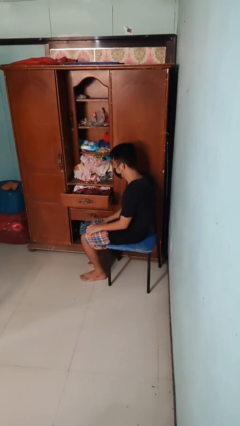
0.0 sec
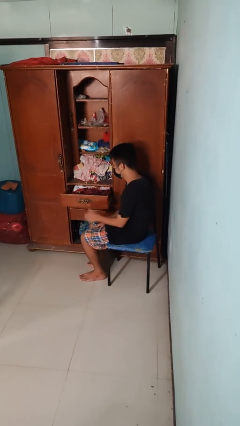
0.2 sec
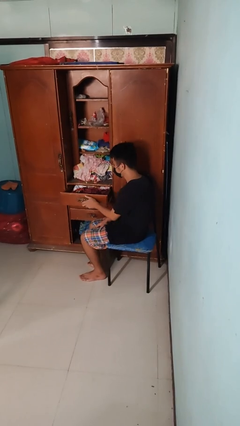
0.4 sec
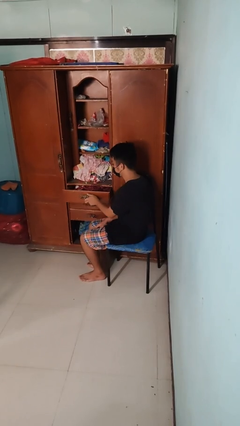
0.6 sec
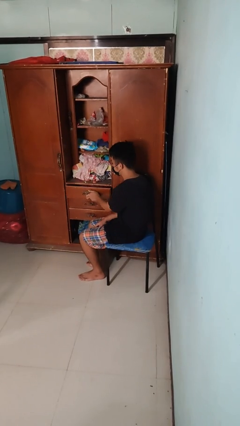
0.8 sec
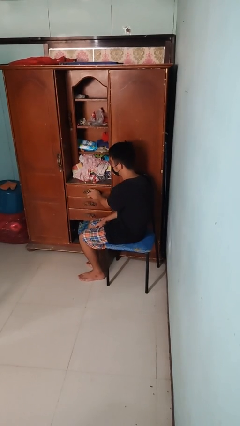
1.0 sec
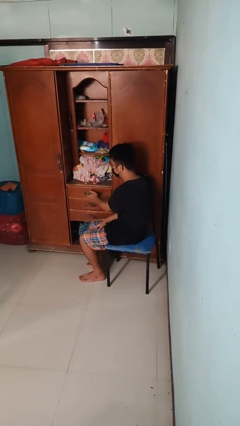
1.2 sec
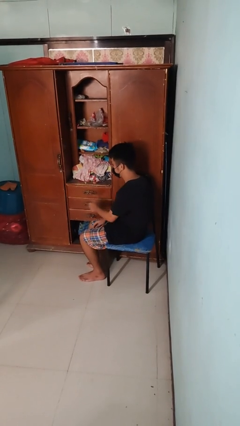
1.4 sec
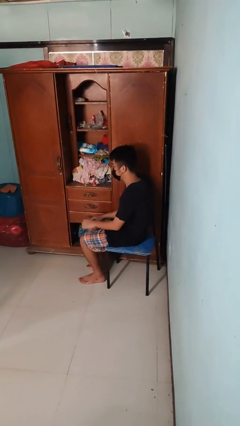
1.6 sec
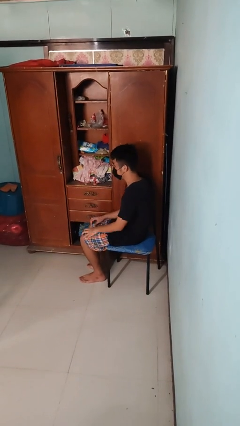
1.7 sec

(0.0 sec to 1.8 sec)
person closes dresser drawer

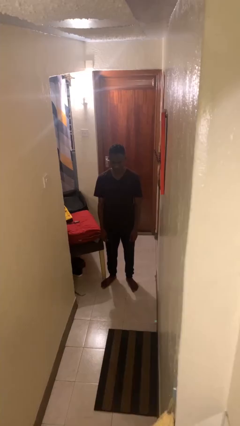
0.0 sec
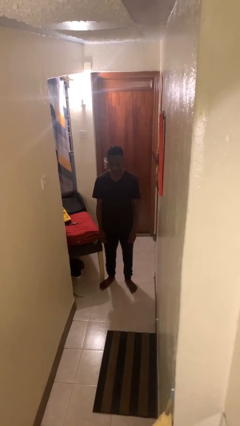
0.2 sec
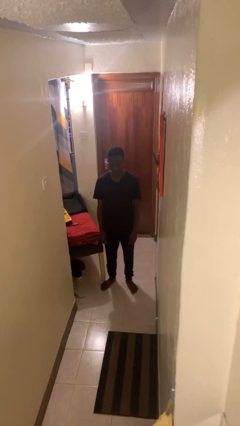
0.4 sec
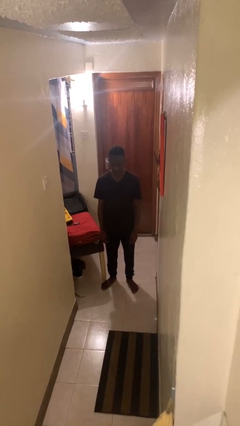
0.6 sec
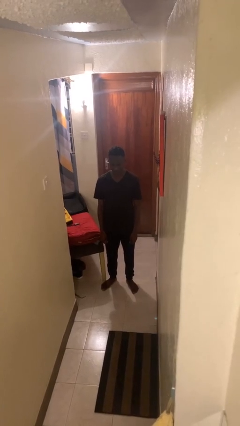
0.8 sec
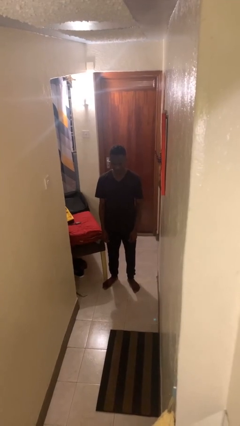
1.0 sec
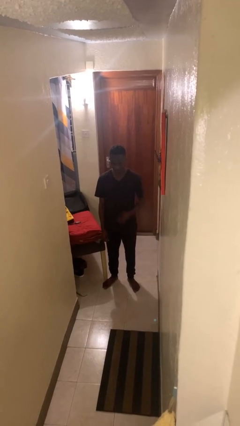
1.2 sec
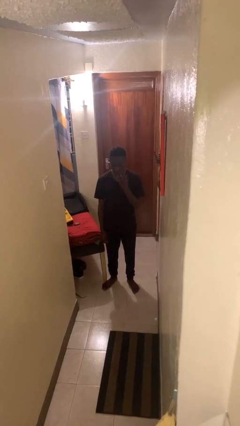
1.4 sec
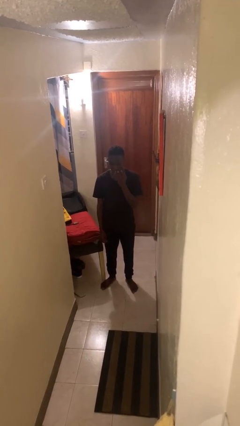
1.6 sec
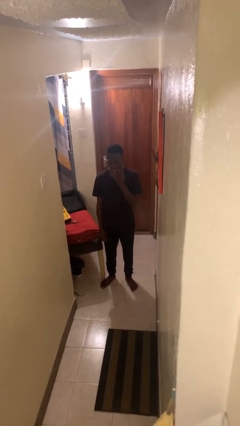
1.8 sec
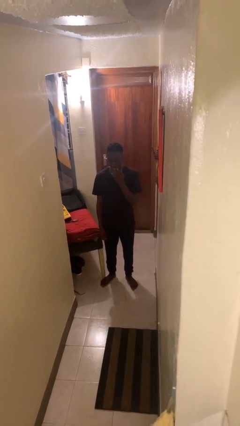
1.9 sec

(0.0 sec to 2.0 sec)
person licks fingers

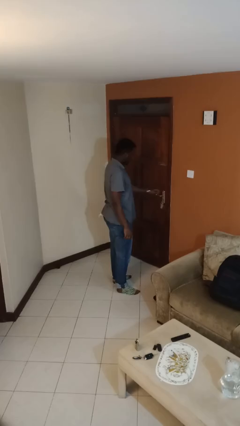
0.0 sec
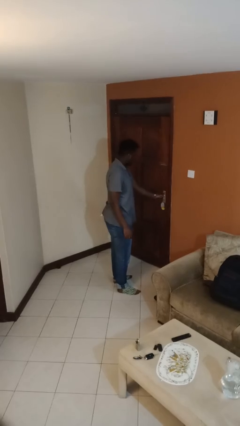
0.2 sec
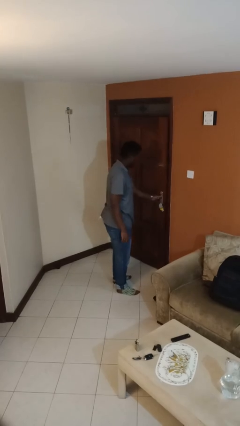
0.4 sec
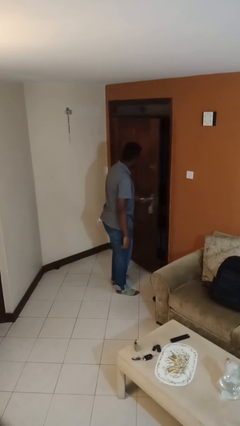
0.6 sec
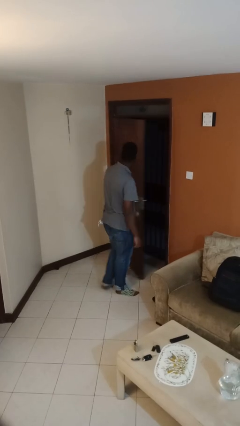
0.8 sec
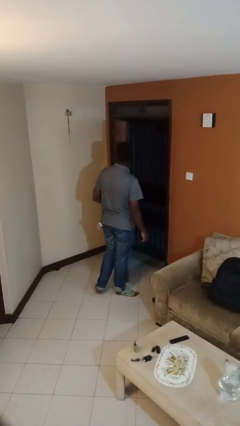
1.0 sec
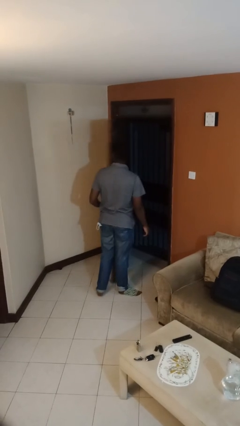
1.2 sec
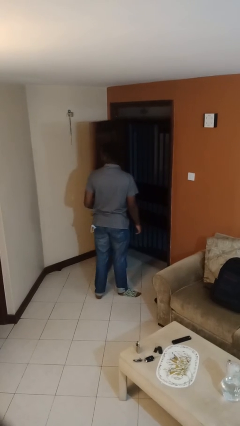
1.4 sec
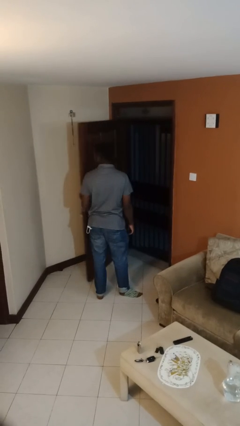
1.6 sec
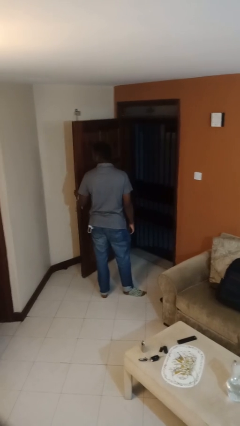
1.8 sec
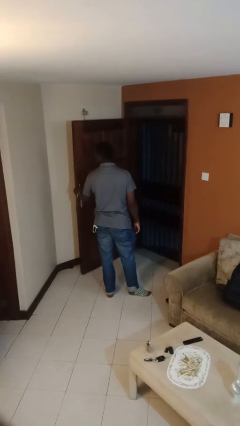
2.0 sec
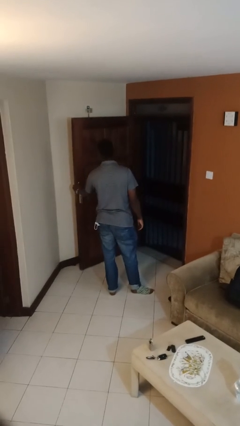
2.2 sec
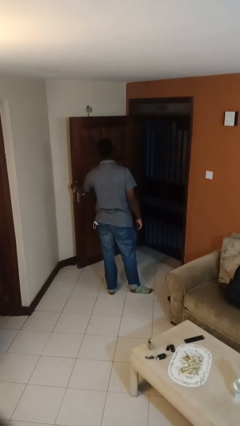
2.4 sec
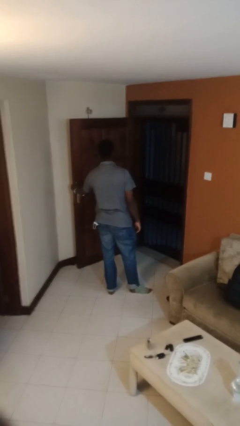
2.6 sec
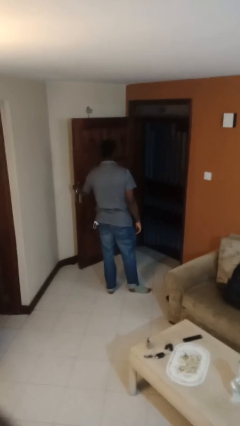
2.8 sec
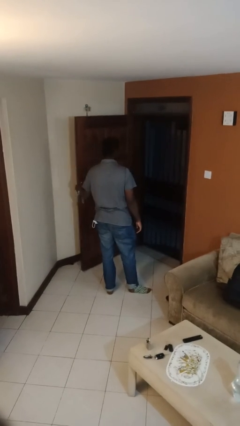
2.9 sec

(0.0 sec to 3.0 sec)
person opens facility door

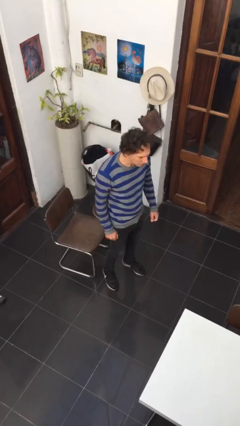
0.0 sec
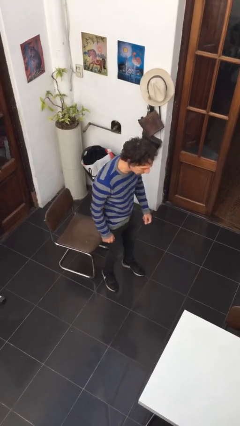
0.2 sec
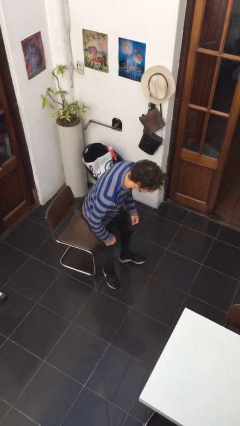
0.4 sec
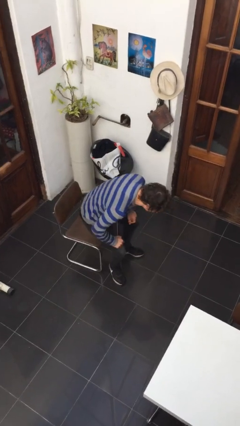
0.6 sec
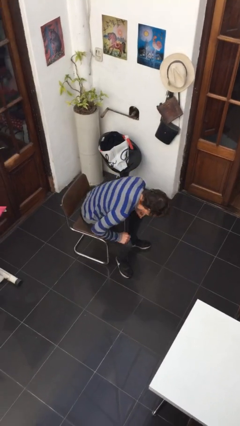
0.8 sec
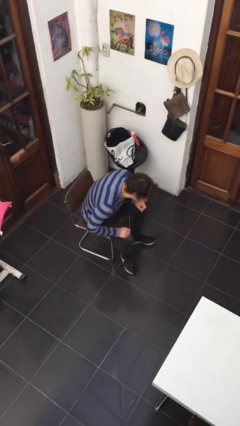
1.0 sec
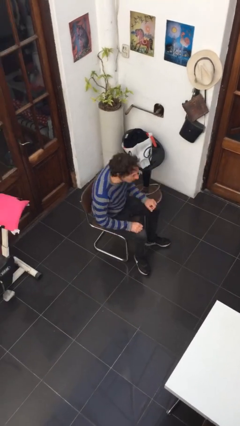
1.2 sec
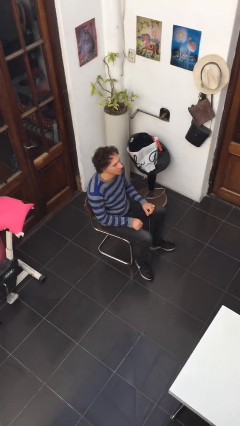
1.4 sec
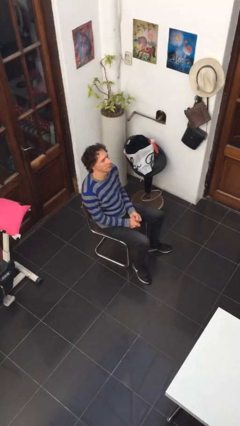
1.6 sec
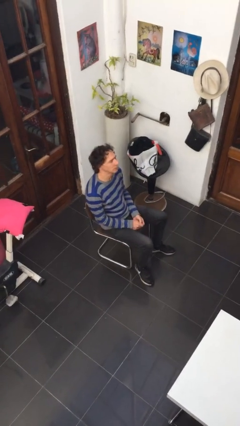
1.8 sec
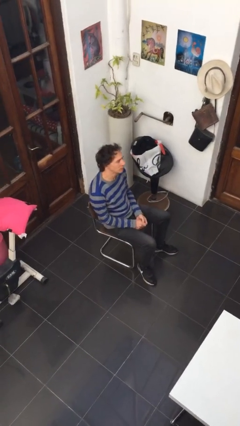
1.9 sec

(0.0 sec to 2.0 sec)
person sits down

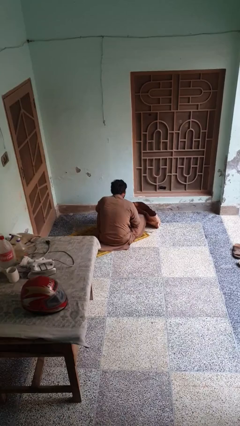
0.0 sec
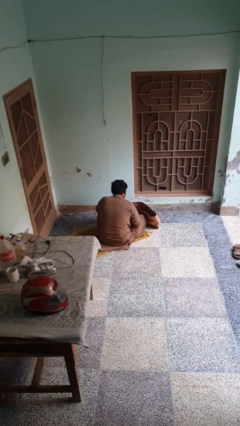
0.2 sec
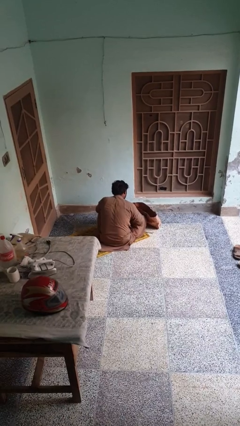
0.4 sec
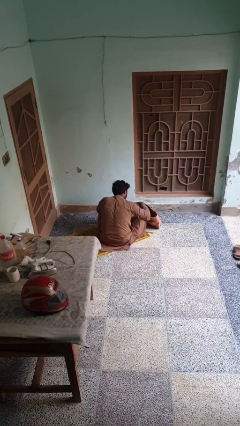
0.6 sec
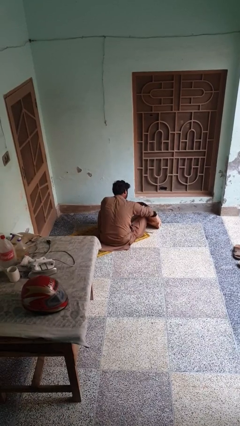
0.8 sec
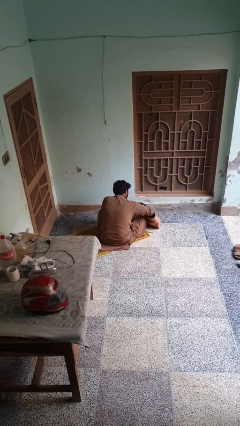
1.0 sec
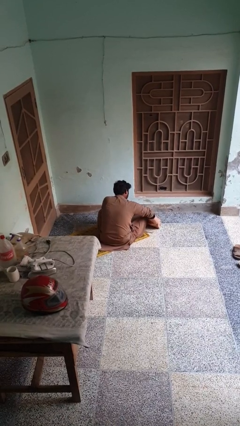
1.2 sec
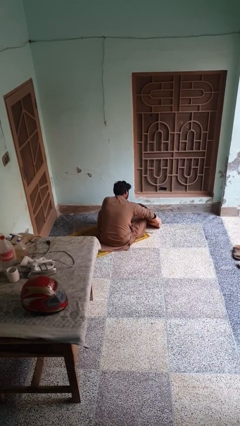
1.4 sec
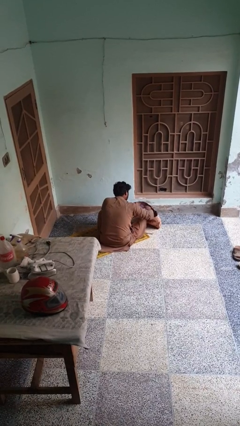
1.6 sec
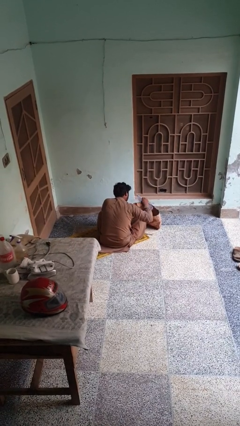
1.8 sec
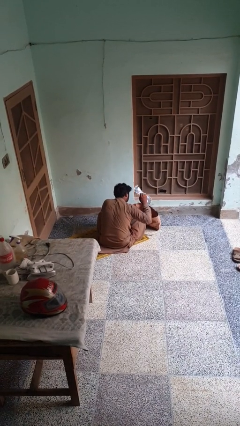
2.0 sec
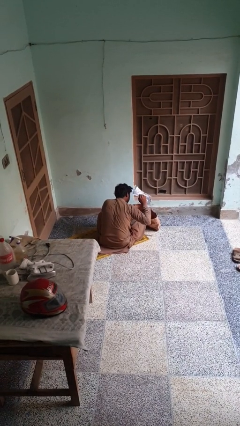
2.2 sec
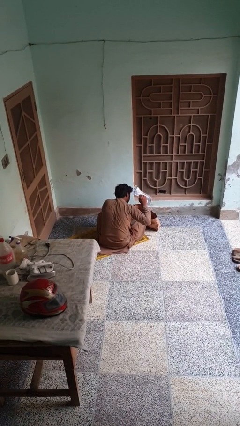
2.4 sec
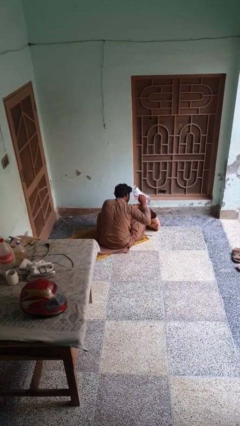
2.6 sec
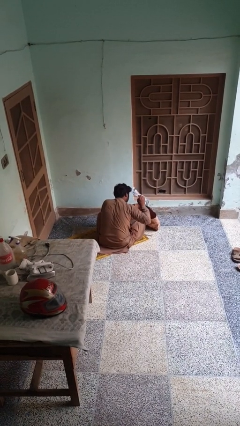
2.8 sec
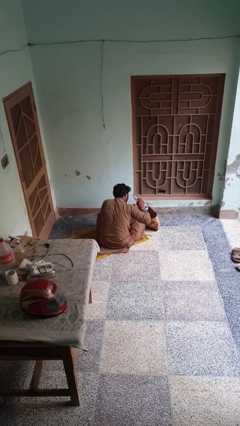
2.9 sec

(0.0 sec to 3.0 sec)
person searches in bag

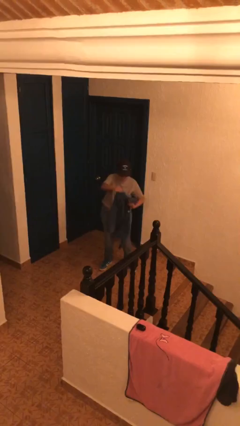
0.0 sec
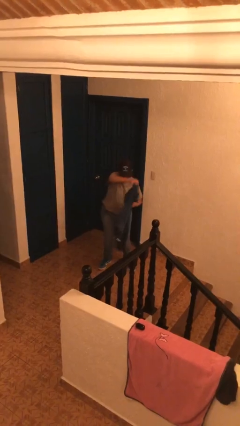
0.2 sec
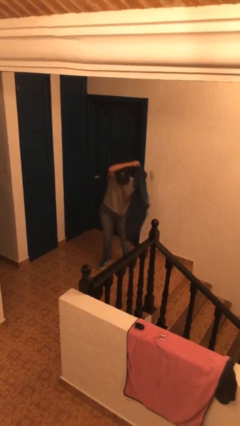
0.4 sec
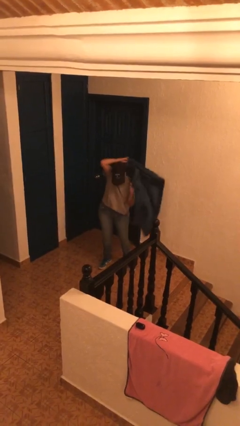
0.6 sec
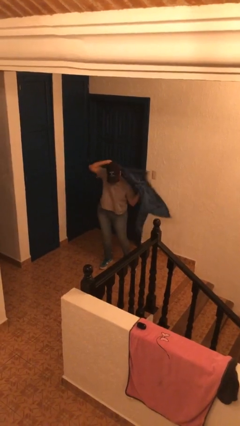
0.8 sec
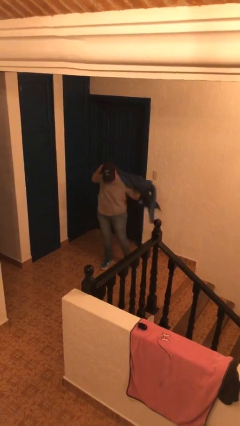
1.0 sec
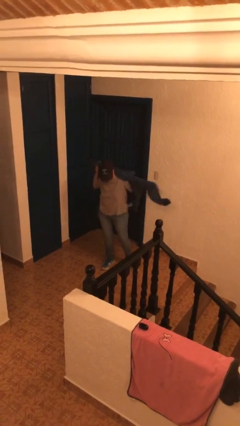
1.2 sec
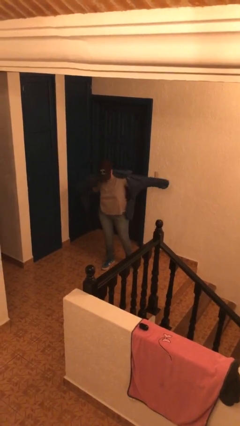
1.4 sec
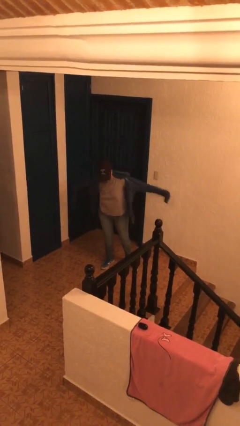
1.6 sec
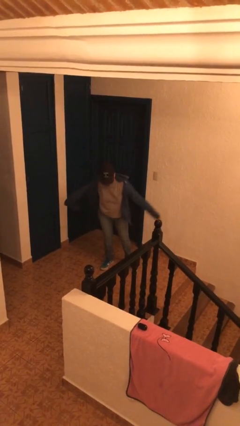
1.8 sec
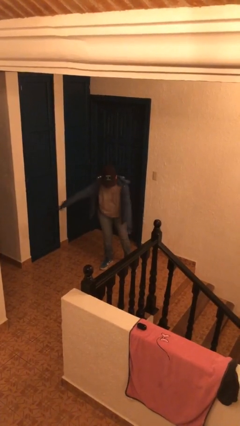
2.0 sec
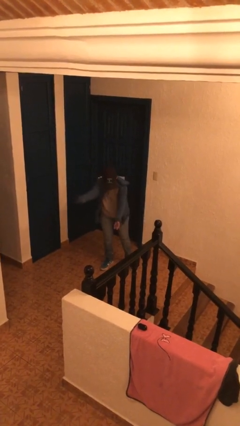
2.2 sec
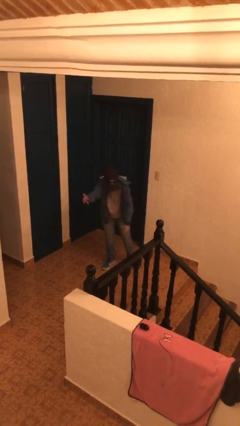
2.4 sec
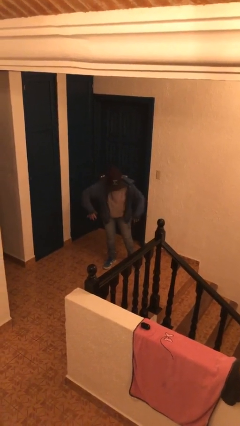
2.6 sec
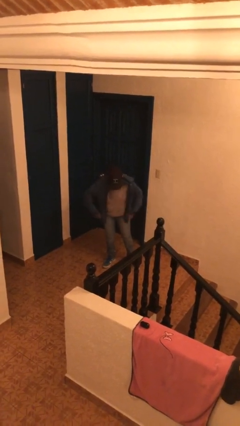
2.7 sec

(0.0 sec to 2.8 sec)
person puts on jacket

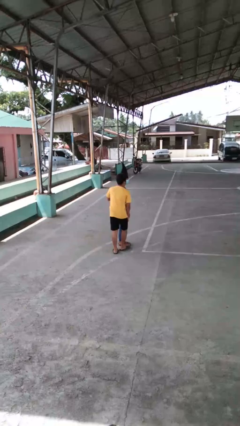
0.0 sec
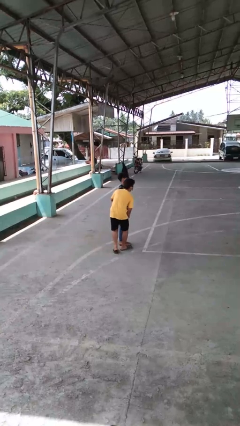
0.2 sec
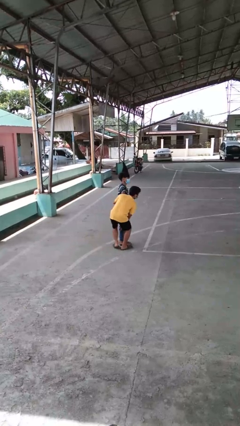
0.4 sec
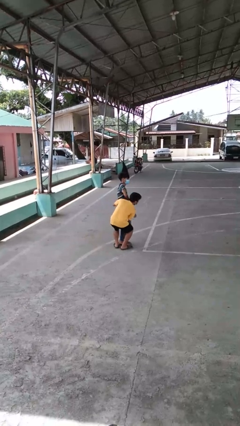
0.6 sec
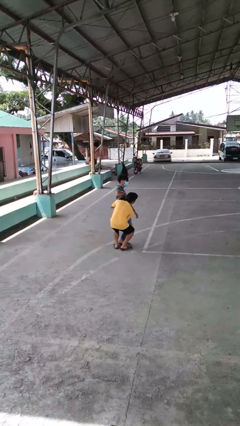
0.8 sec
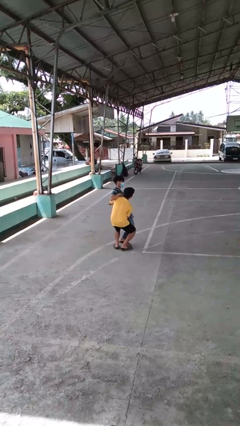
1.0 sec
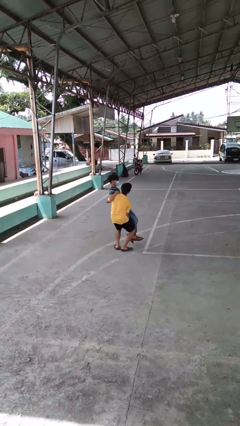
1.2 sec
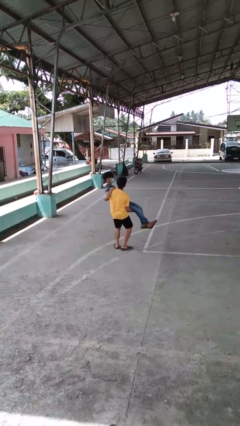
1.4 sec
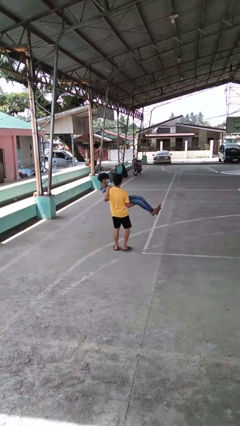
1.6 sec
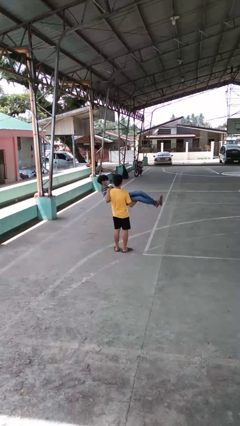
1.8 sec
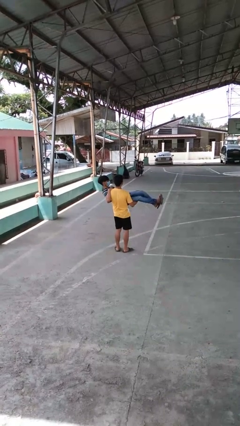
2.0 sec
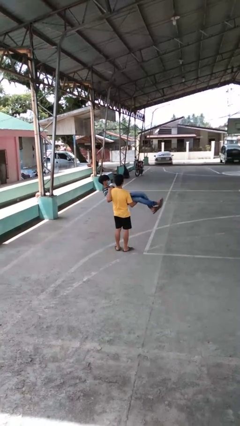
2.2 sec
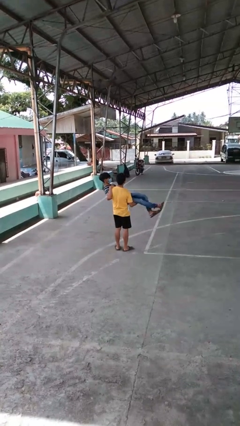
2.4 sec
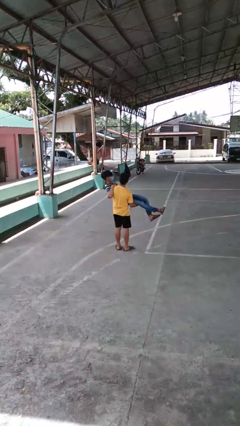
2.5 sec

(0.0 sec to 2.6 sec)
person picks up person

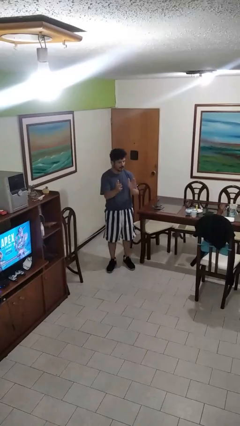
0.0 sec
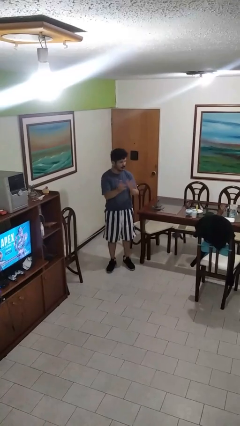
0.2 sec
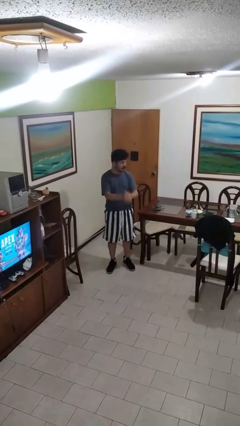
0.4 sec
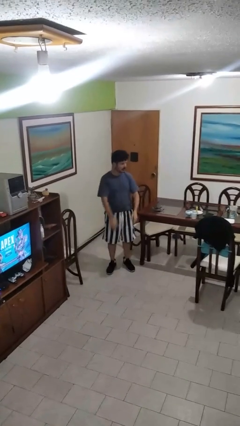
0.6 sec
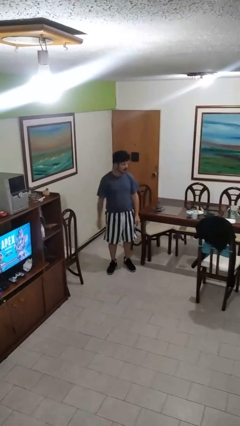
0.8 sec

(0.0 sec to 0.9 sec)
person claps hands
